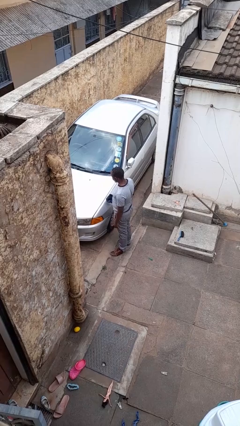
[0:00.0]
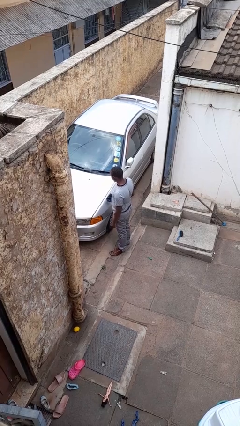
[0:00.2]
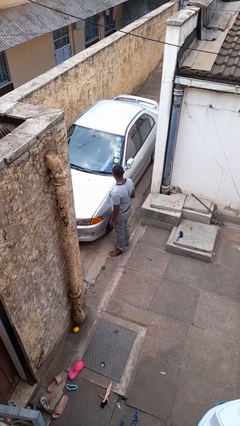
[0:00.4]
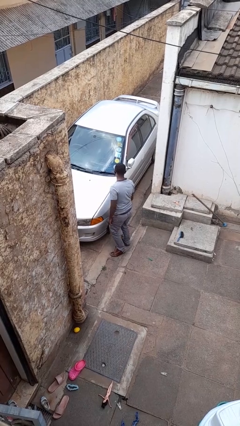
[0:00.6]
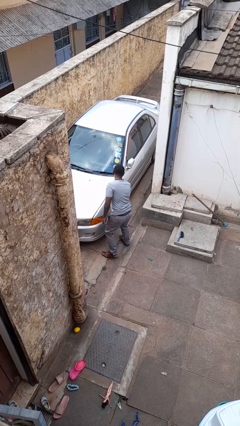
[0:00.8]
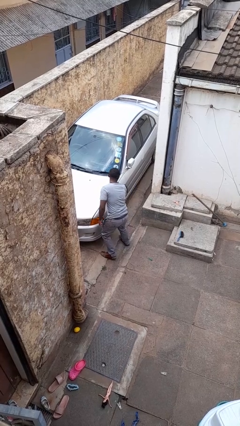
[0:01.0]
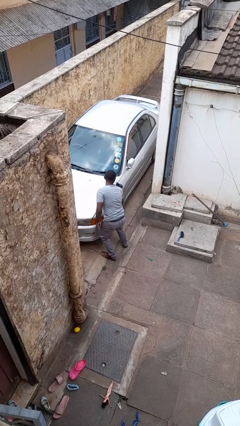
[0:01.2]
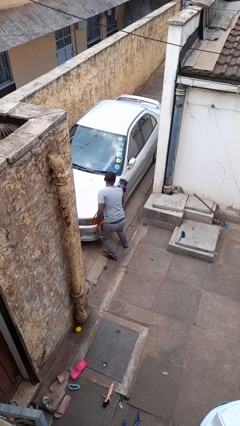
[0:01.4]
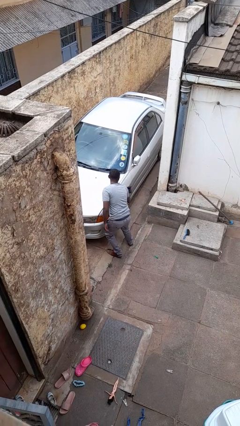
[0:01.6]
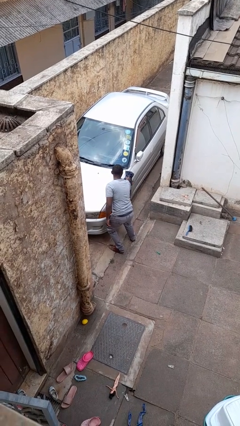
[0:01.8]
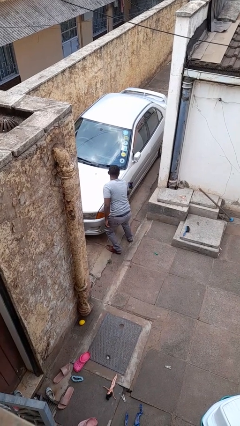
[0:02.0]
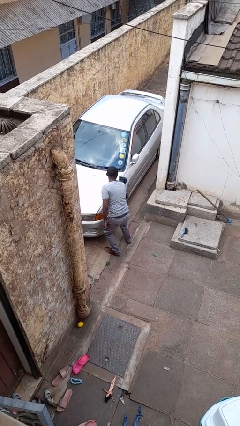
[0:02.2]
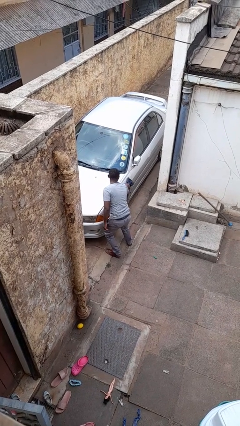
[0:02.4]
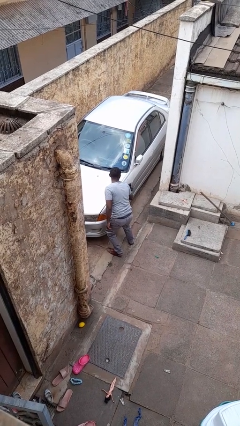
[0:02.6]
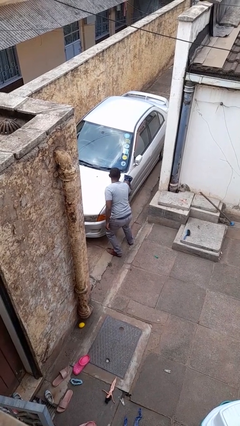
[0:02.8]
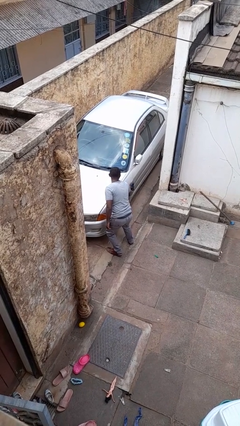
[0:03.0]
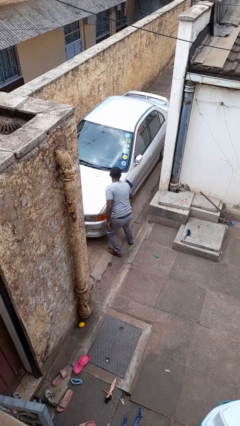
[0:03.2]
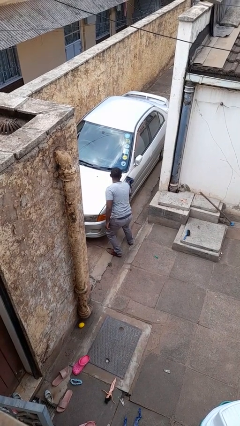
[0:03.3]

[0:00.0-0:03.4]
person polishes car with rag

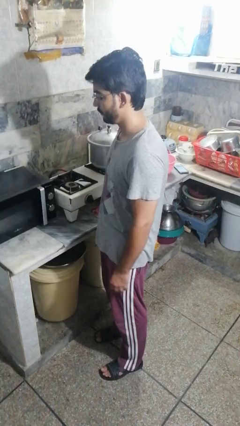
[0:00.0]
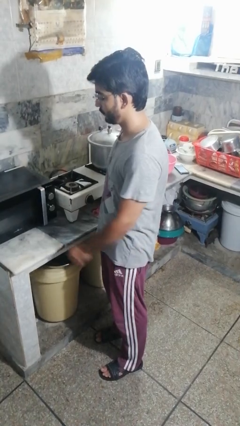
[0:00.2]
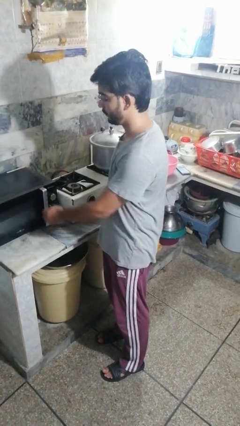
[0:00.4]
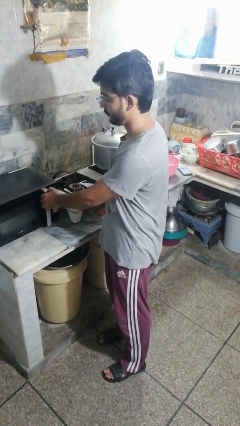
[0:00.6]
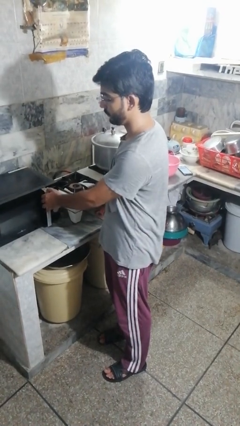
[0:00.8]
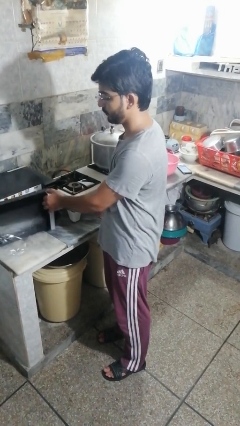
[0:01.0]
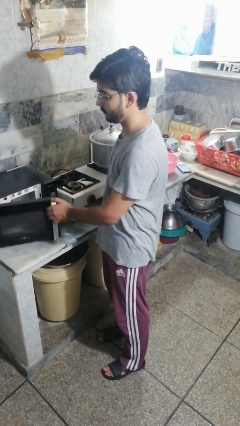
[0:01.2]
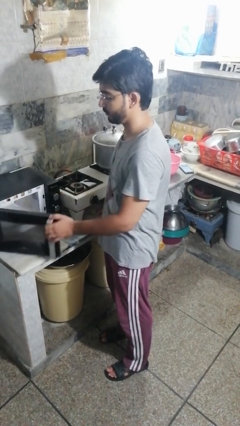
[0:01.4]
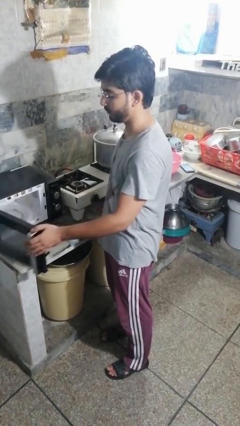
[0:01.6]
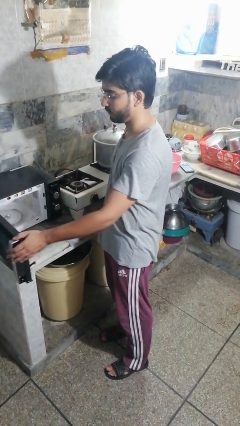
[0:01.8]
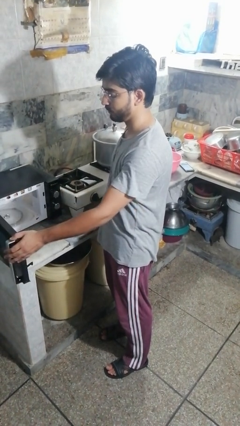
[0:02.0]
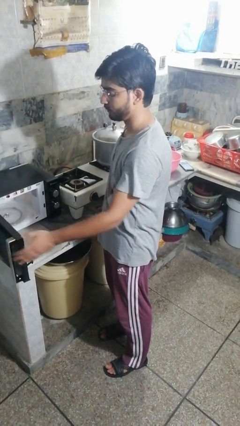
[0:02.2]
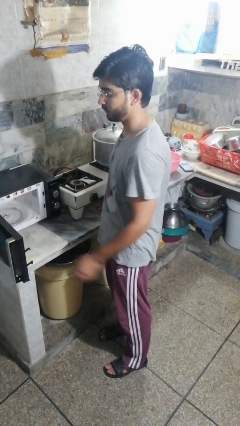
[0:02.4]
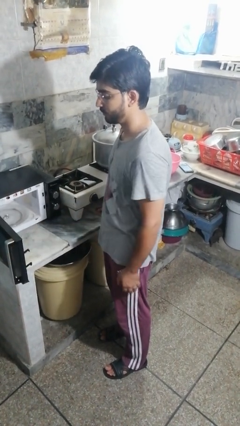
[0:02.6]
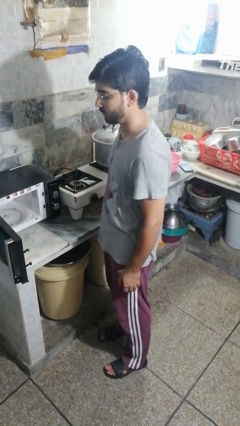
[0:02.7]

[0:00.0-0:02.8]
person opens oven door

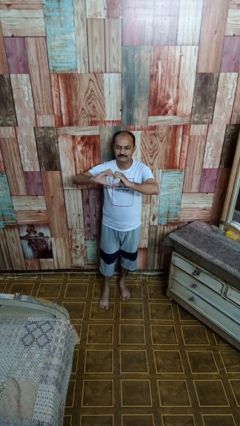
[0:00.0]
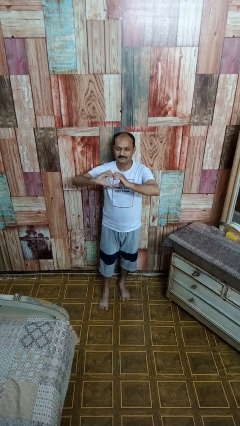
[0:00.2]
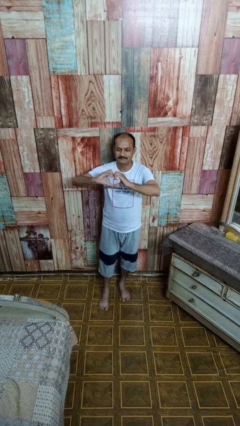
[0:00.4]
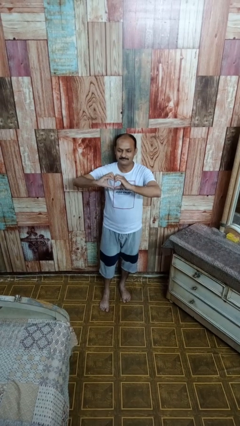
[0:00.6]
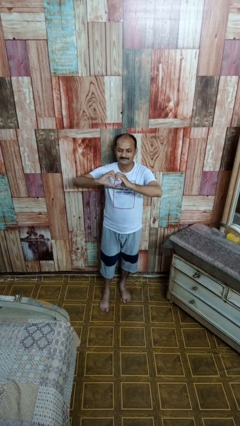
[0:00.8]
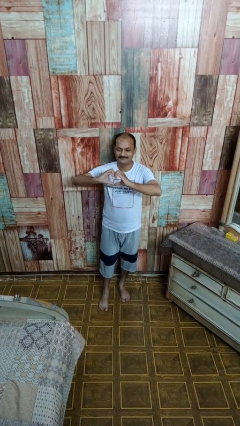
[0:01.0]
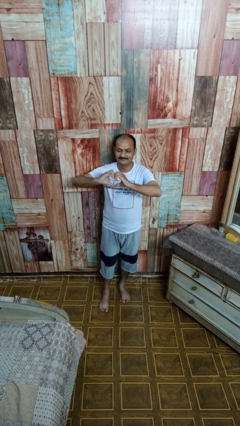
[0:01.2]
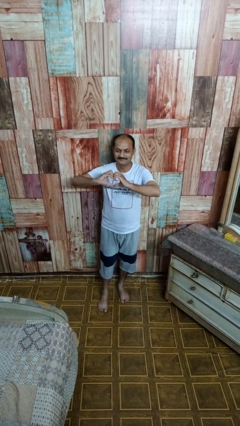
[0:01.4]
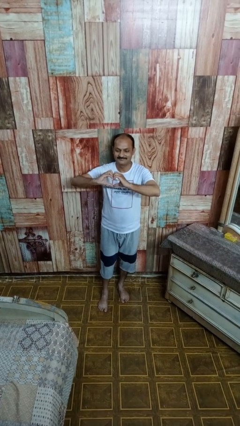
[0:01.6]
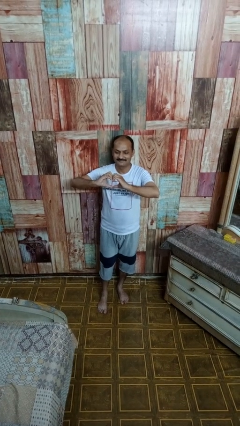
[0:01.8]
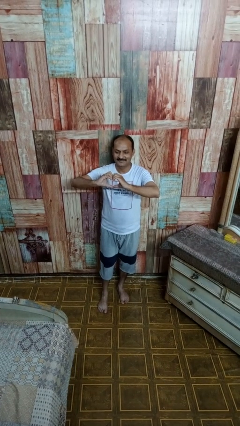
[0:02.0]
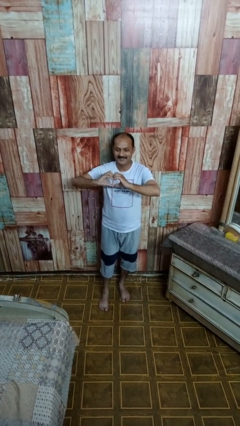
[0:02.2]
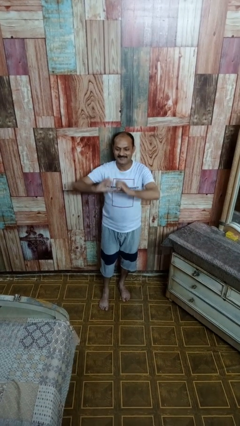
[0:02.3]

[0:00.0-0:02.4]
person gestures heart

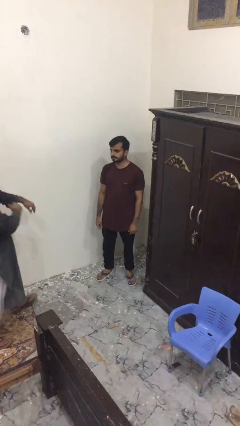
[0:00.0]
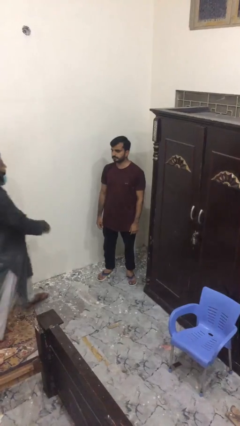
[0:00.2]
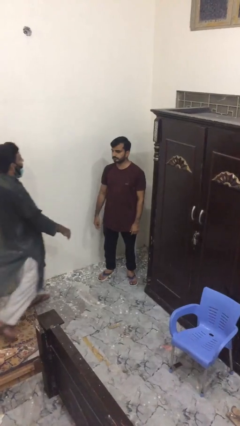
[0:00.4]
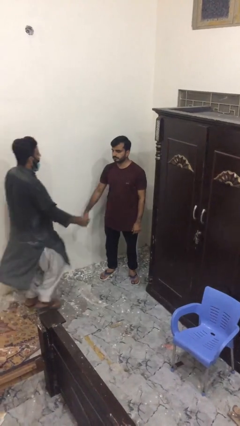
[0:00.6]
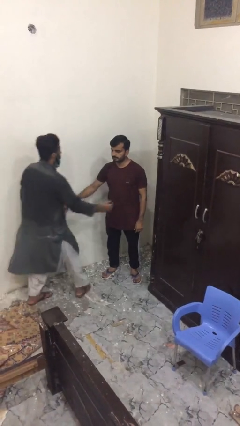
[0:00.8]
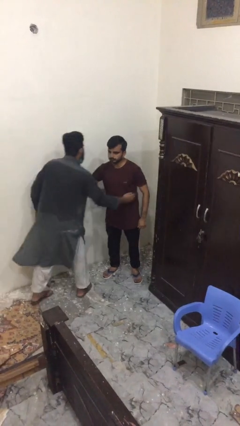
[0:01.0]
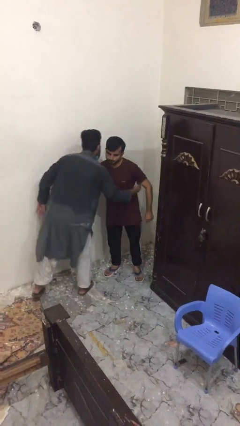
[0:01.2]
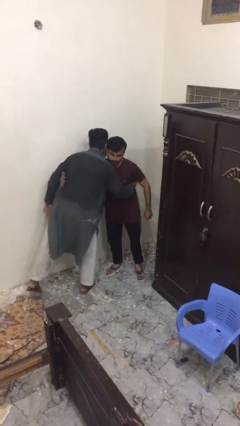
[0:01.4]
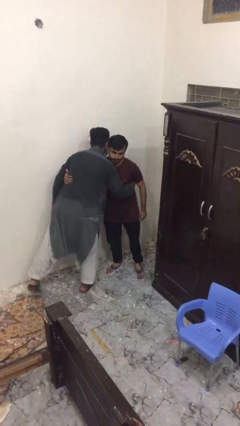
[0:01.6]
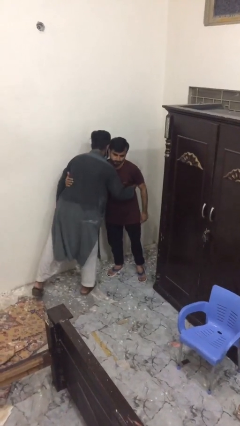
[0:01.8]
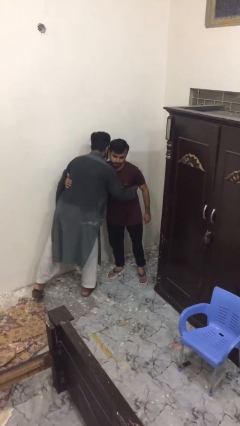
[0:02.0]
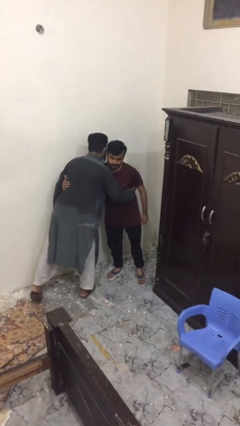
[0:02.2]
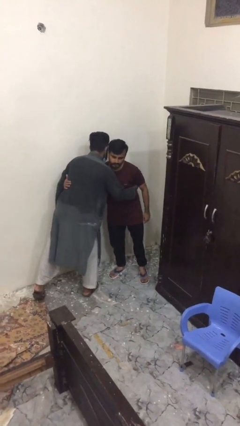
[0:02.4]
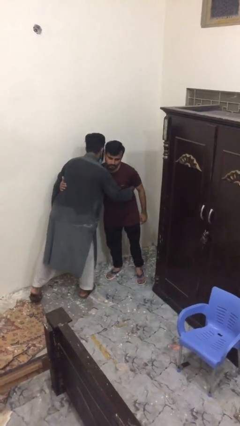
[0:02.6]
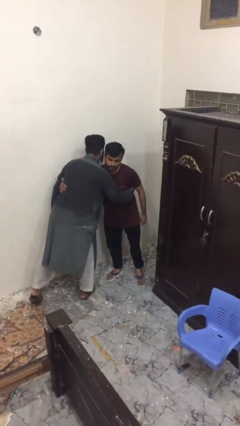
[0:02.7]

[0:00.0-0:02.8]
person embraces person

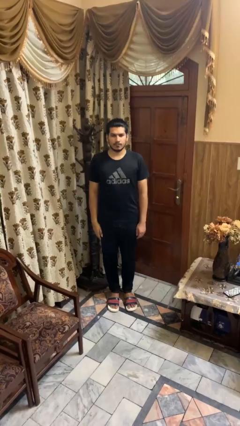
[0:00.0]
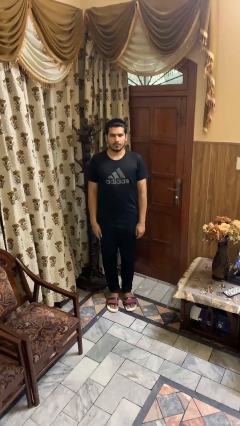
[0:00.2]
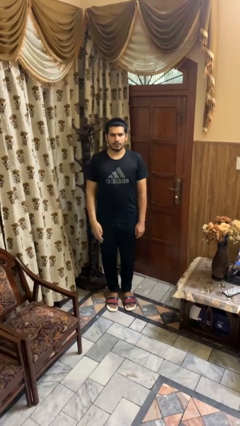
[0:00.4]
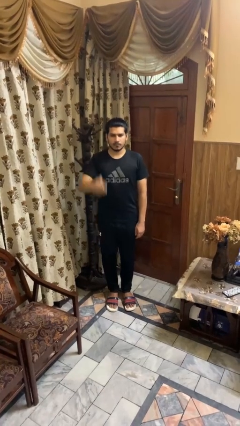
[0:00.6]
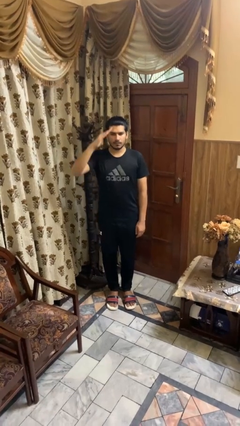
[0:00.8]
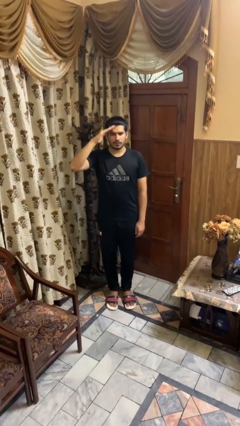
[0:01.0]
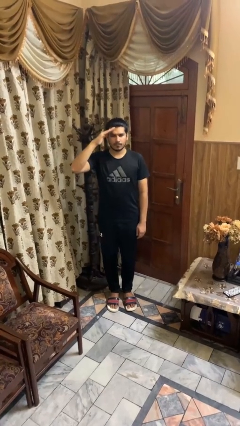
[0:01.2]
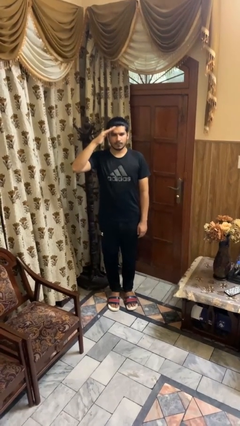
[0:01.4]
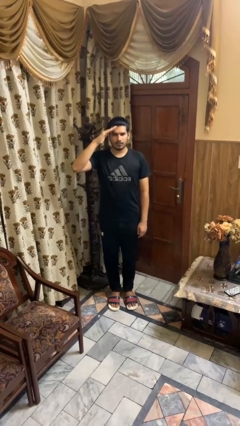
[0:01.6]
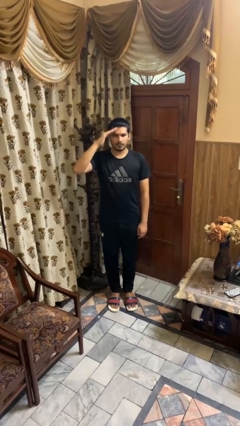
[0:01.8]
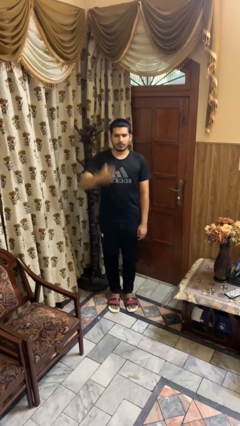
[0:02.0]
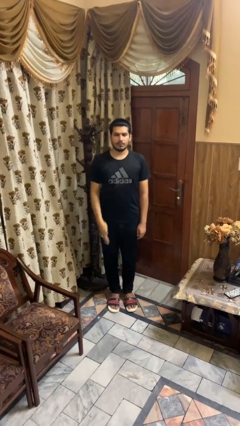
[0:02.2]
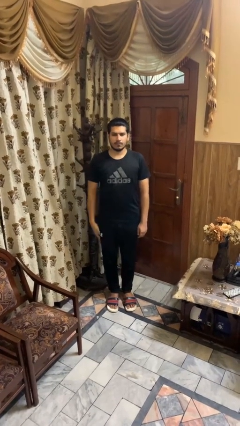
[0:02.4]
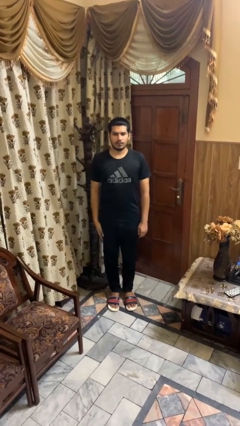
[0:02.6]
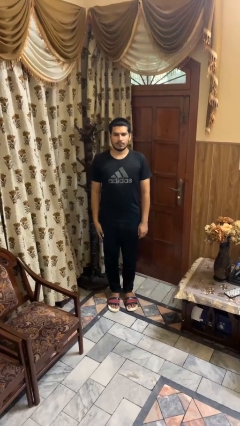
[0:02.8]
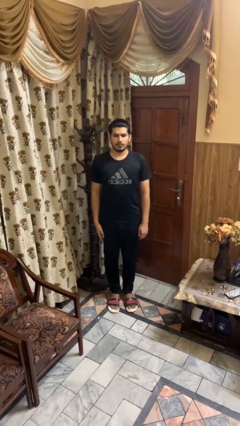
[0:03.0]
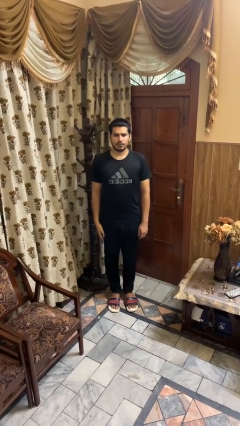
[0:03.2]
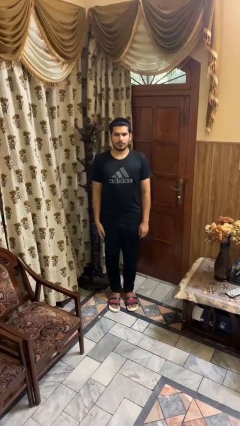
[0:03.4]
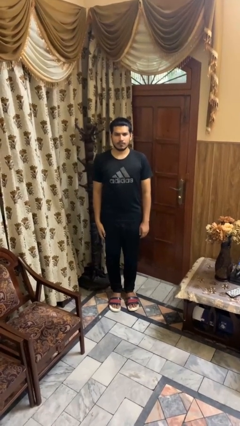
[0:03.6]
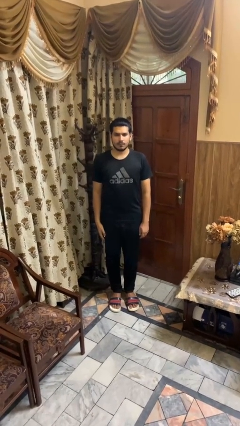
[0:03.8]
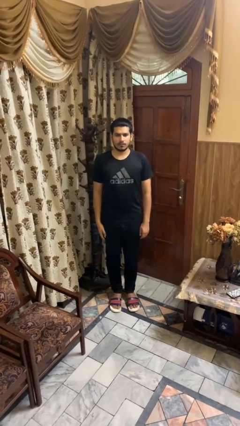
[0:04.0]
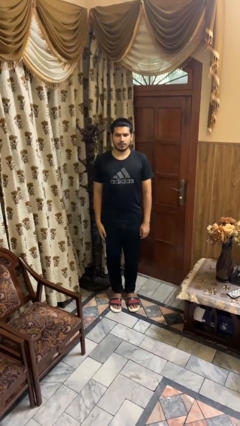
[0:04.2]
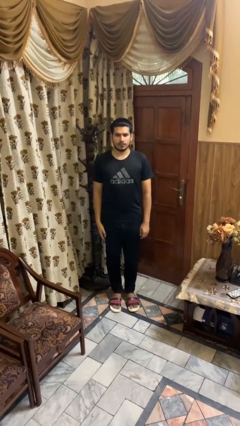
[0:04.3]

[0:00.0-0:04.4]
person salutes

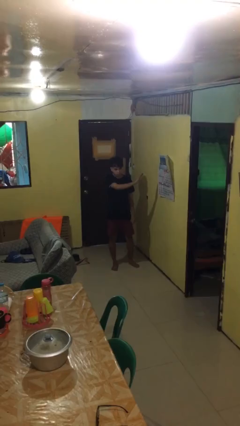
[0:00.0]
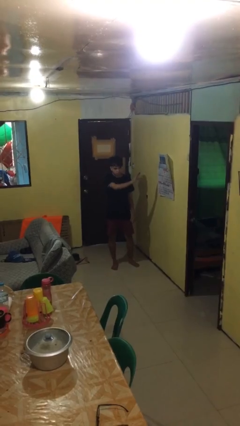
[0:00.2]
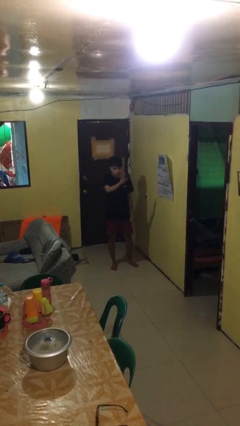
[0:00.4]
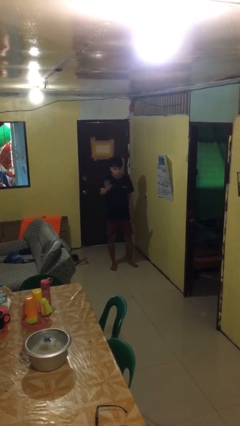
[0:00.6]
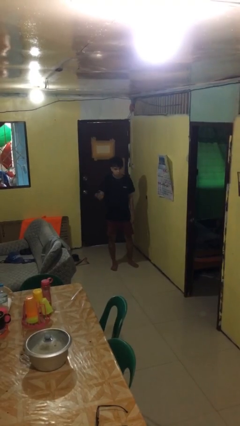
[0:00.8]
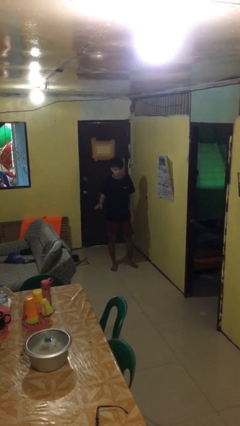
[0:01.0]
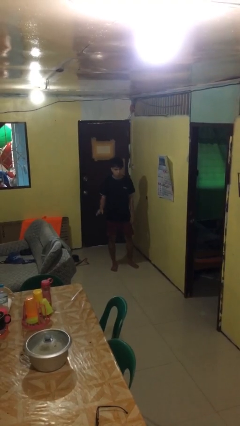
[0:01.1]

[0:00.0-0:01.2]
person gestures swipe right

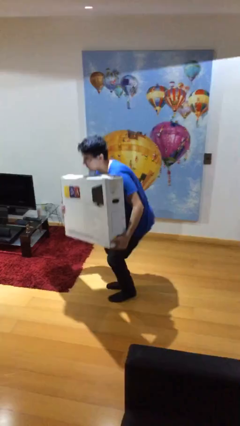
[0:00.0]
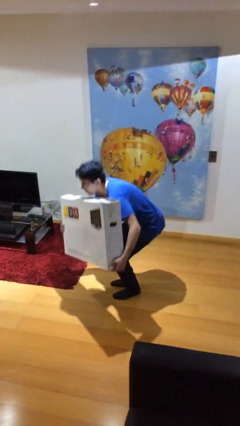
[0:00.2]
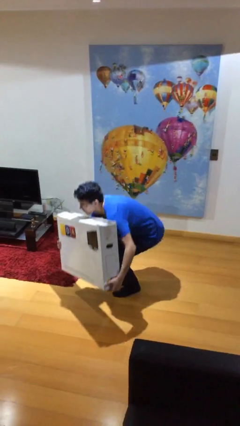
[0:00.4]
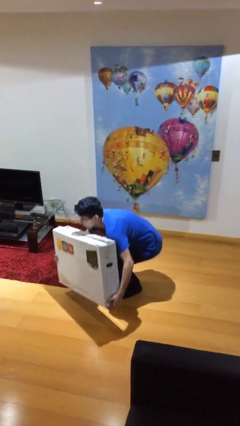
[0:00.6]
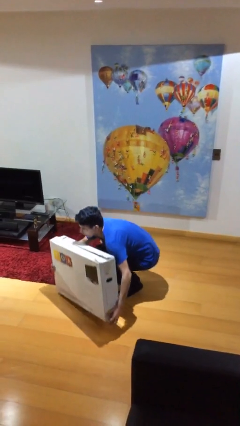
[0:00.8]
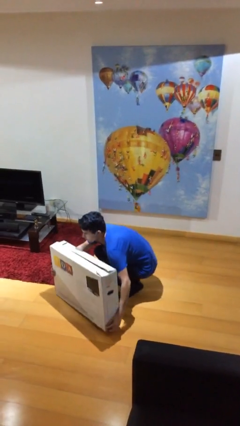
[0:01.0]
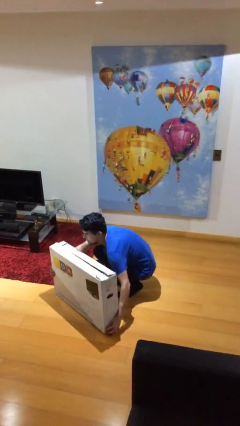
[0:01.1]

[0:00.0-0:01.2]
person puts down object on floor
